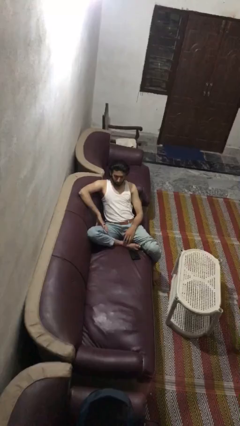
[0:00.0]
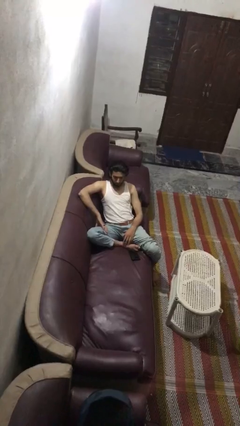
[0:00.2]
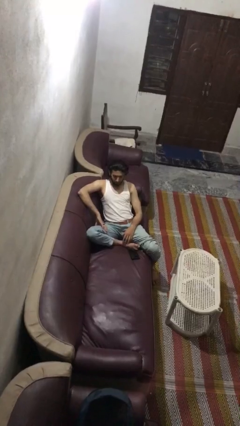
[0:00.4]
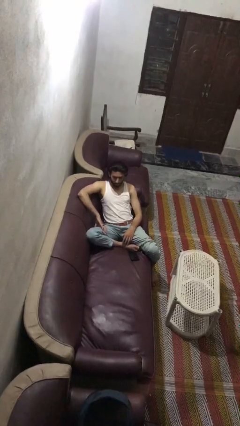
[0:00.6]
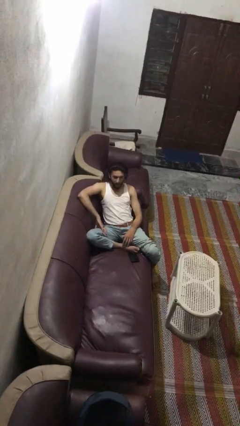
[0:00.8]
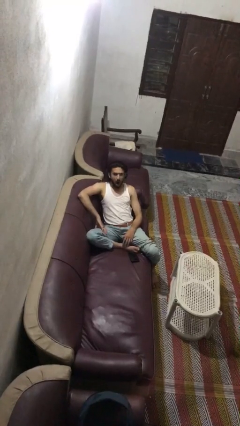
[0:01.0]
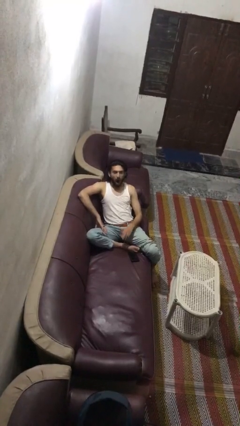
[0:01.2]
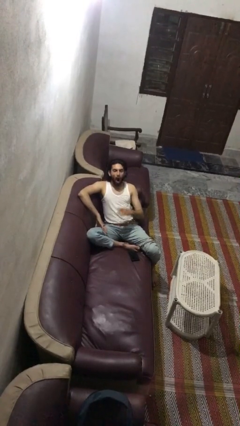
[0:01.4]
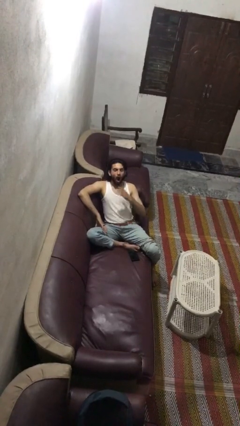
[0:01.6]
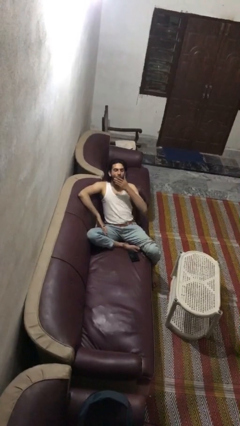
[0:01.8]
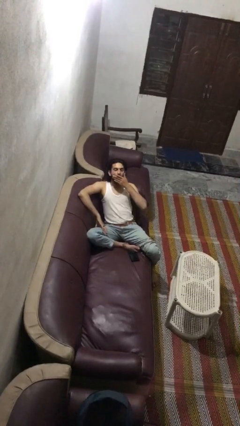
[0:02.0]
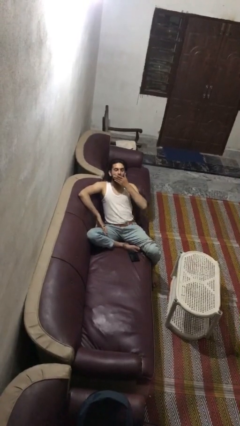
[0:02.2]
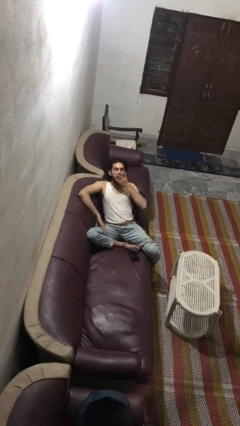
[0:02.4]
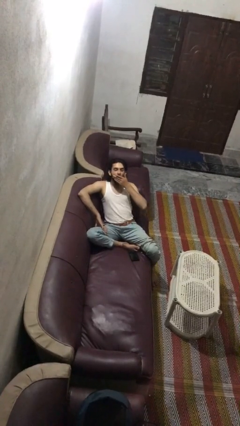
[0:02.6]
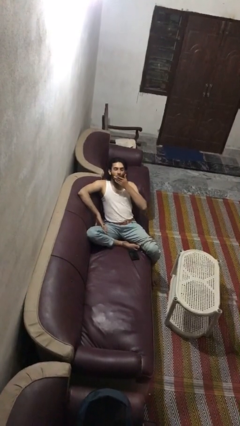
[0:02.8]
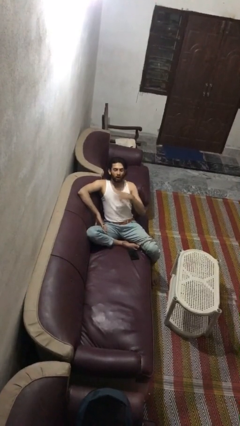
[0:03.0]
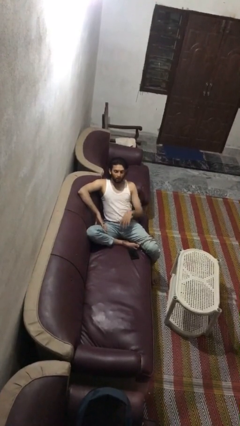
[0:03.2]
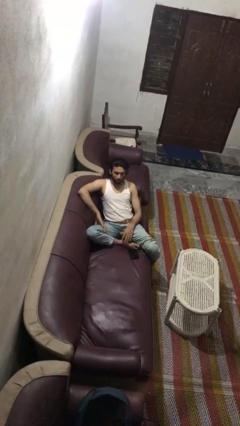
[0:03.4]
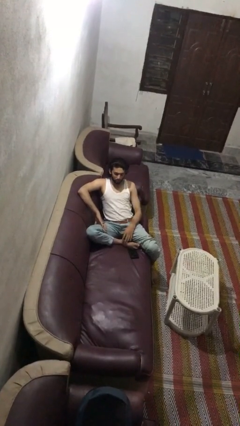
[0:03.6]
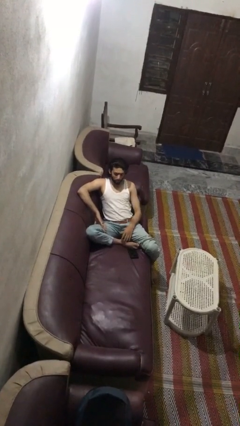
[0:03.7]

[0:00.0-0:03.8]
person yawns

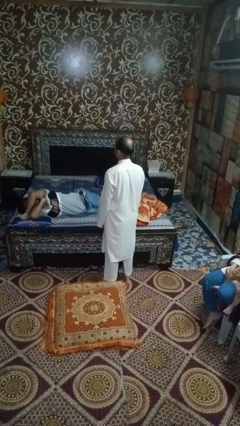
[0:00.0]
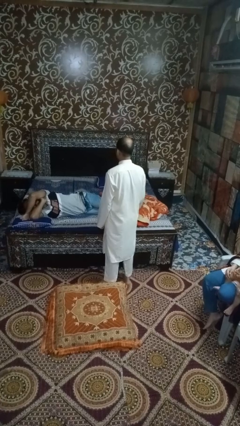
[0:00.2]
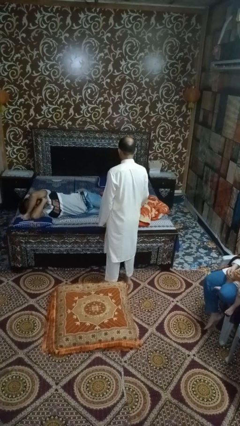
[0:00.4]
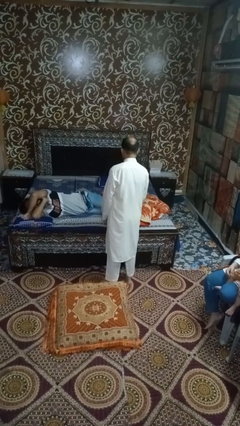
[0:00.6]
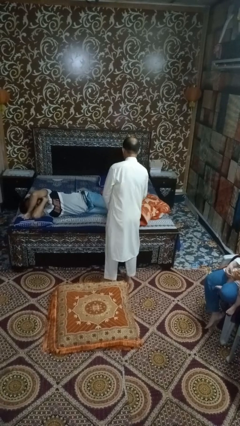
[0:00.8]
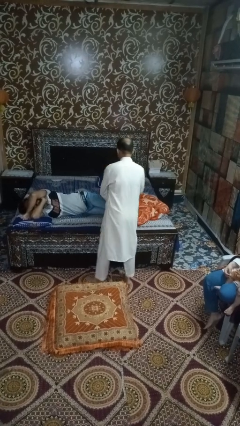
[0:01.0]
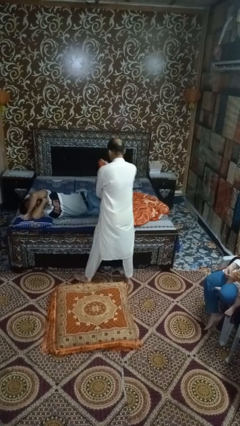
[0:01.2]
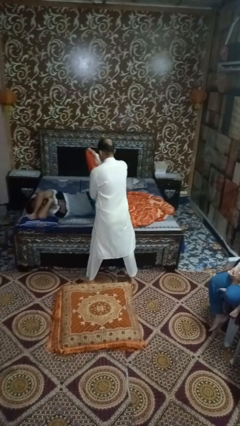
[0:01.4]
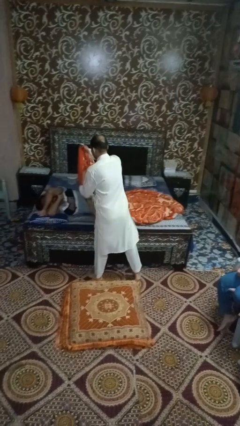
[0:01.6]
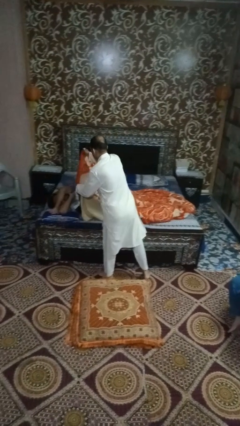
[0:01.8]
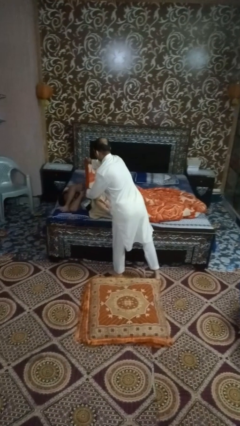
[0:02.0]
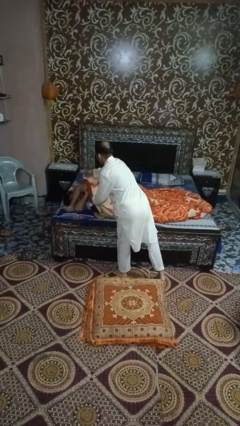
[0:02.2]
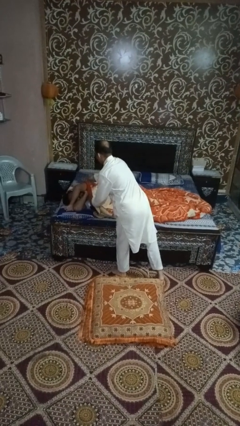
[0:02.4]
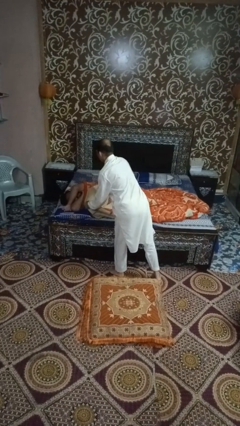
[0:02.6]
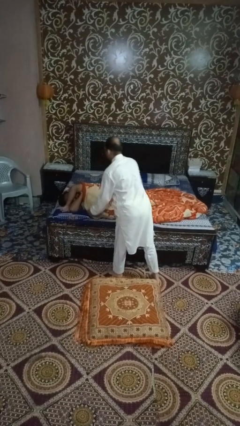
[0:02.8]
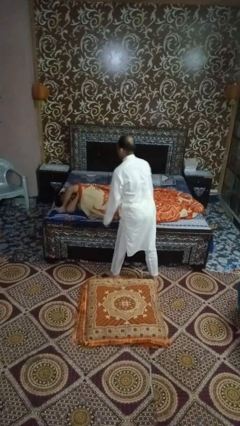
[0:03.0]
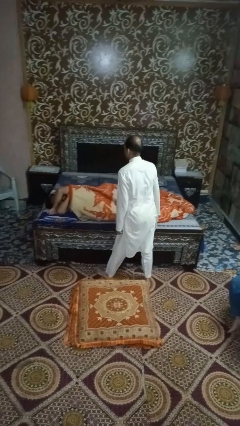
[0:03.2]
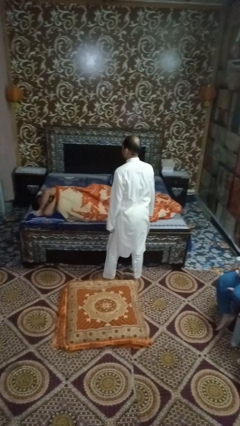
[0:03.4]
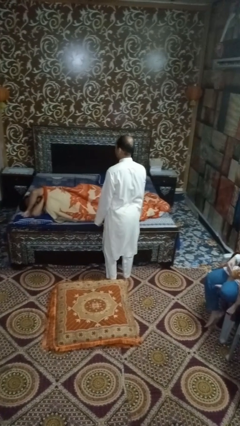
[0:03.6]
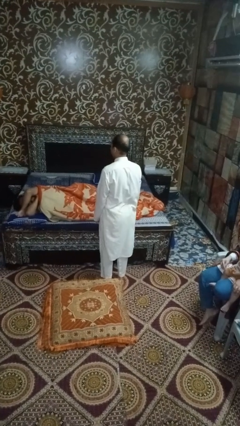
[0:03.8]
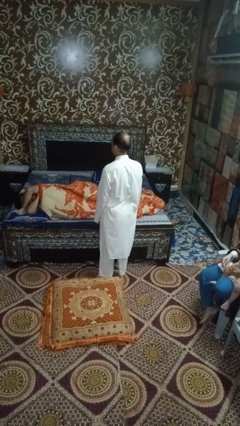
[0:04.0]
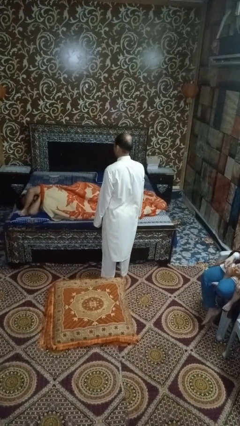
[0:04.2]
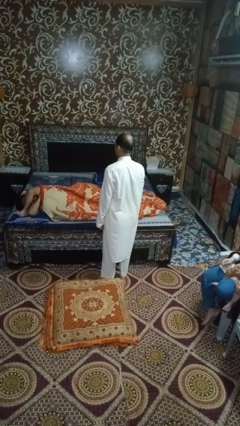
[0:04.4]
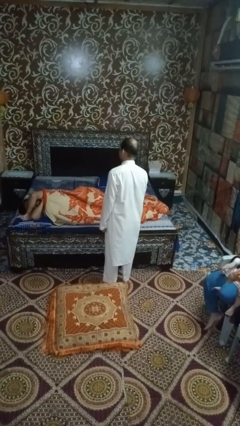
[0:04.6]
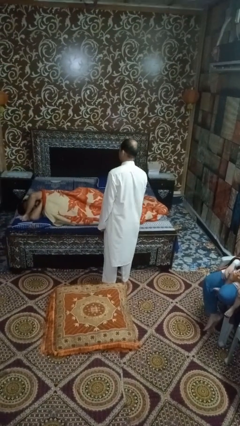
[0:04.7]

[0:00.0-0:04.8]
person covers friend with blanket

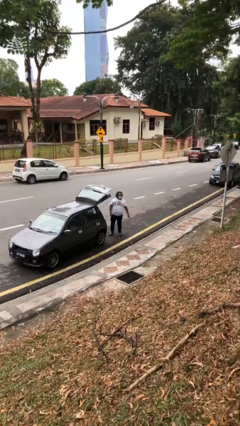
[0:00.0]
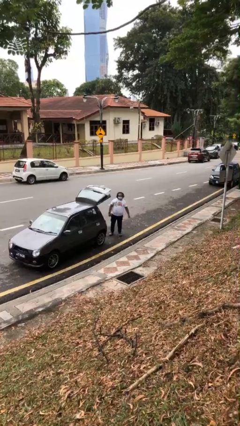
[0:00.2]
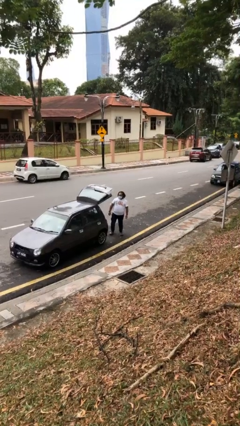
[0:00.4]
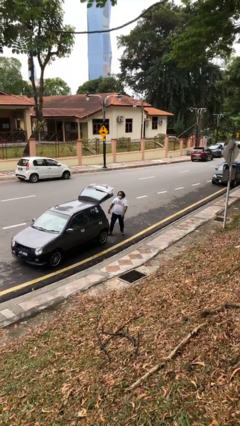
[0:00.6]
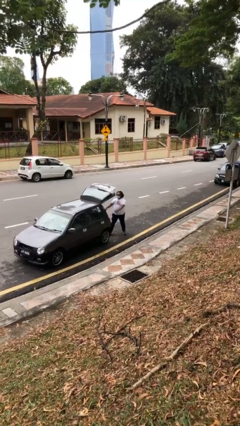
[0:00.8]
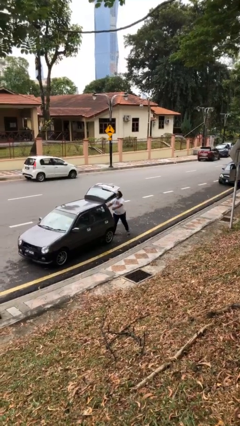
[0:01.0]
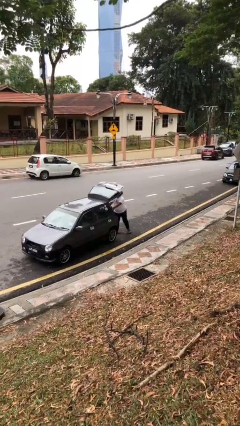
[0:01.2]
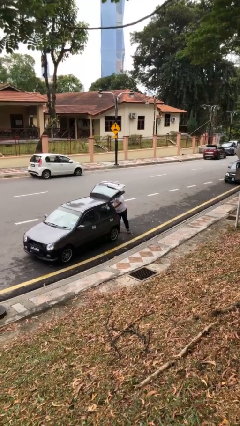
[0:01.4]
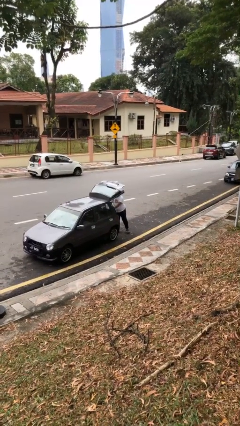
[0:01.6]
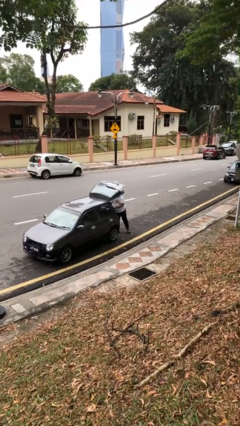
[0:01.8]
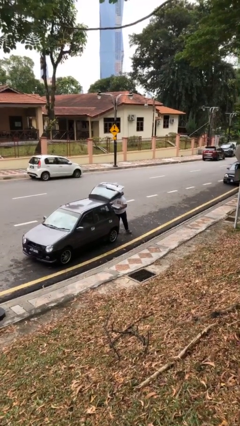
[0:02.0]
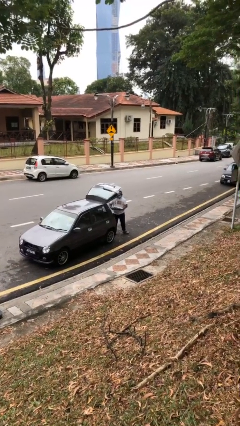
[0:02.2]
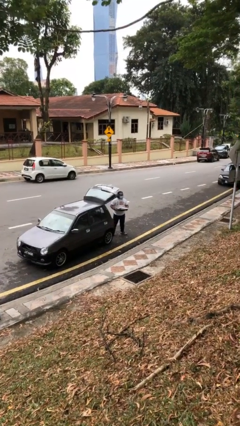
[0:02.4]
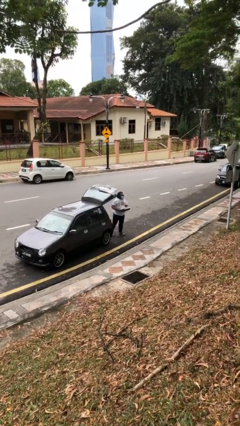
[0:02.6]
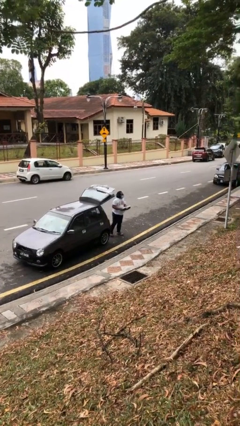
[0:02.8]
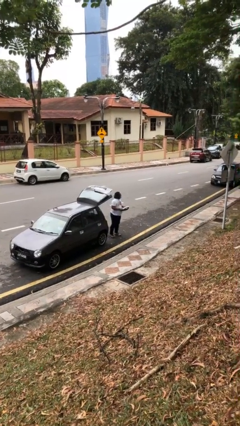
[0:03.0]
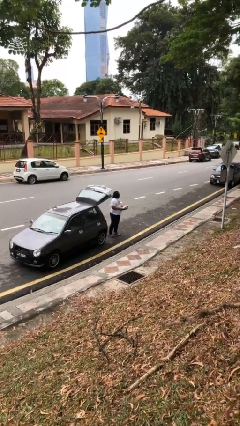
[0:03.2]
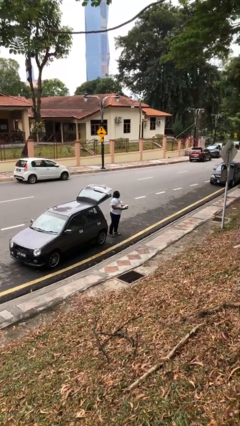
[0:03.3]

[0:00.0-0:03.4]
person unloads car

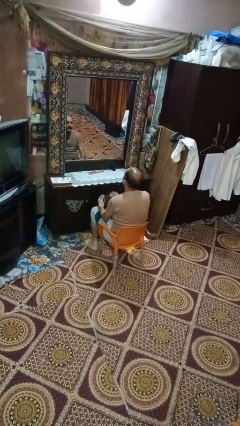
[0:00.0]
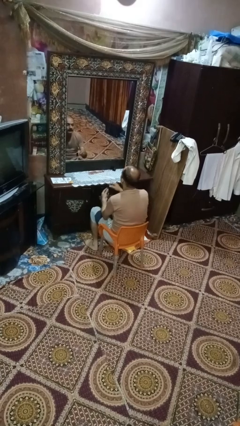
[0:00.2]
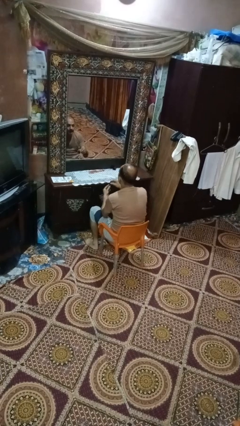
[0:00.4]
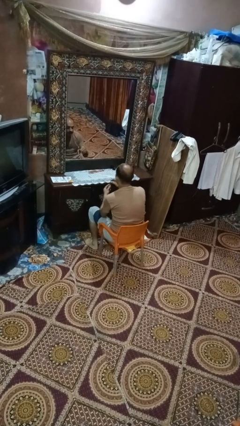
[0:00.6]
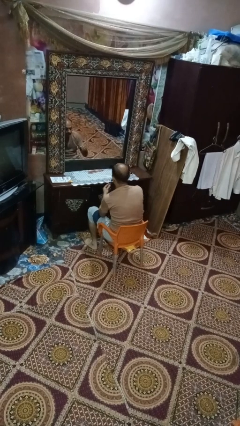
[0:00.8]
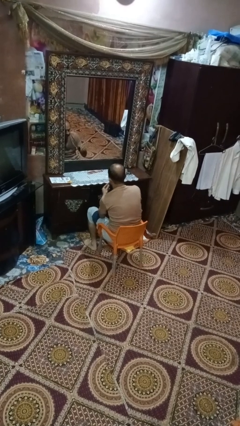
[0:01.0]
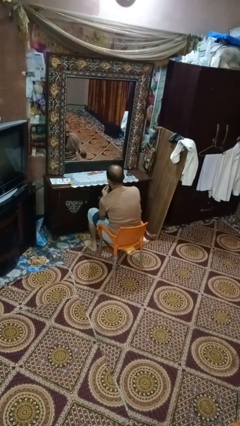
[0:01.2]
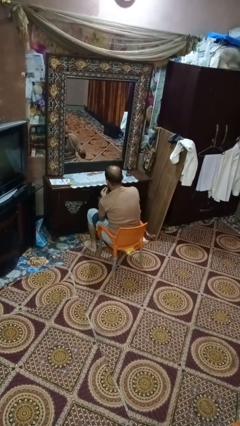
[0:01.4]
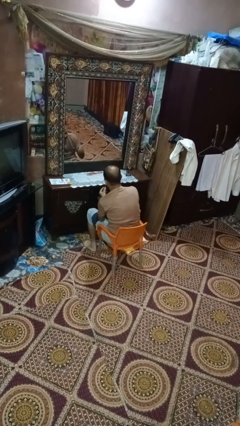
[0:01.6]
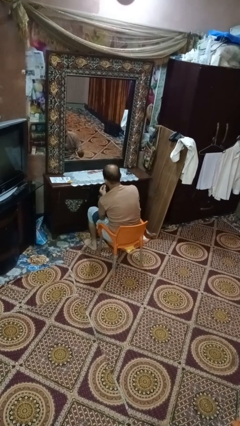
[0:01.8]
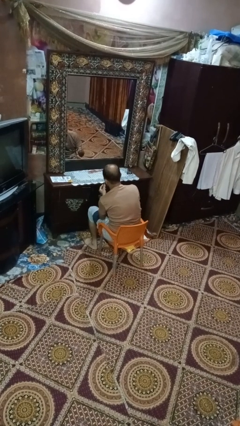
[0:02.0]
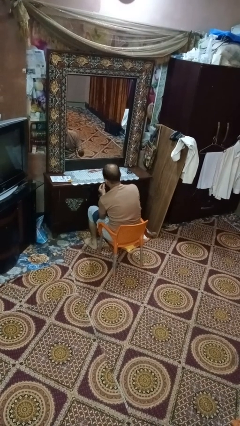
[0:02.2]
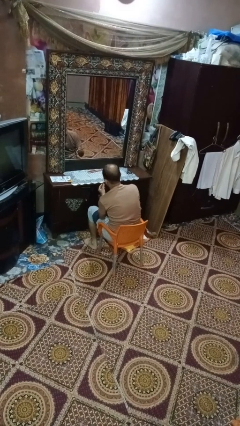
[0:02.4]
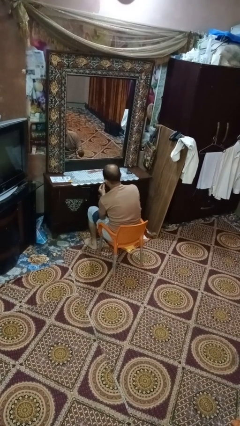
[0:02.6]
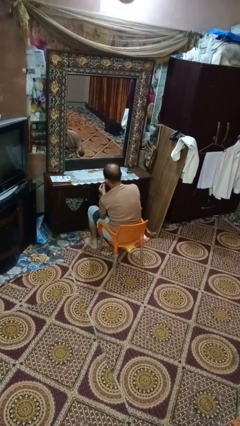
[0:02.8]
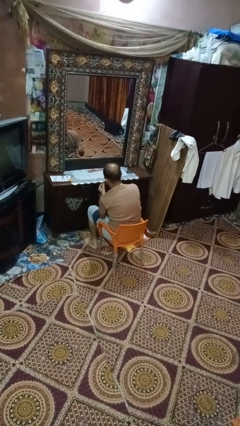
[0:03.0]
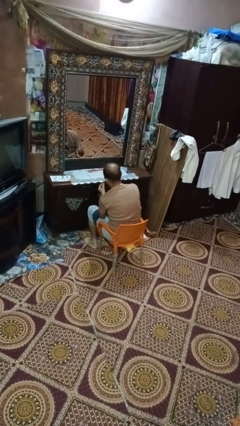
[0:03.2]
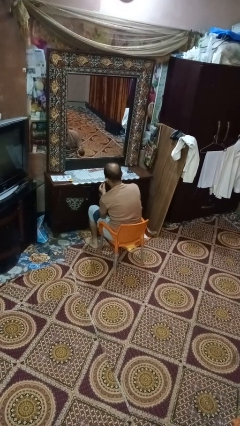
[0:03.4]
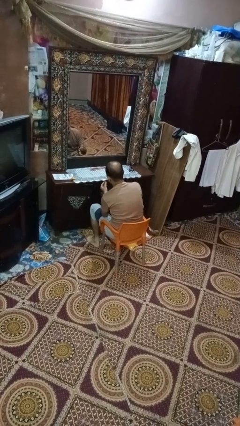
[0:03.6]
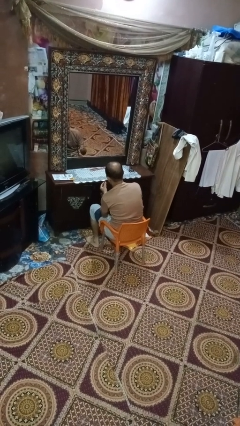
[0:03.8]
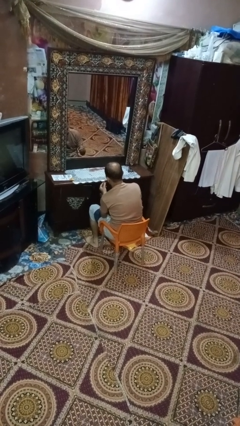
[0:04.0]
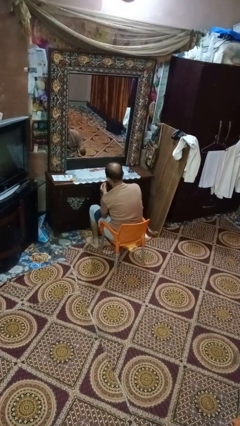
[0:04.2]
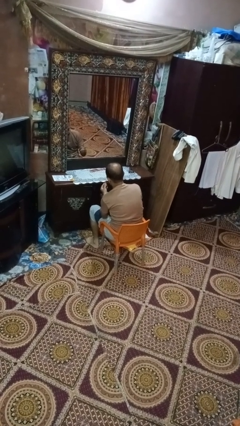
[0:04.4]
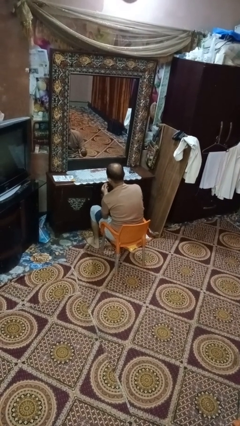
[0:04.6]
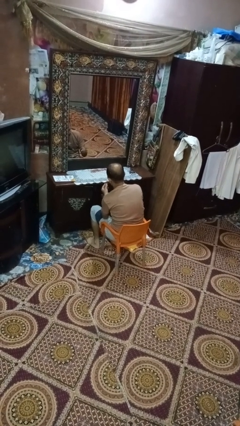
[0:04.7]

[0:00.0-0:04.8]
person paints fingernails

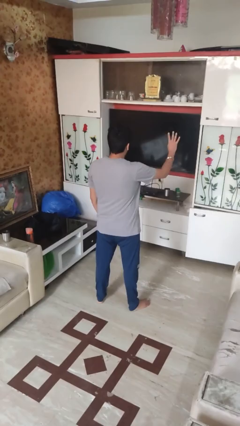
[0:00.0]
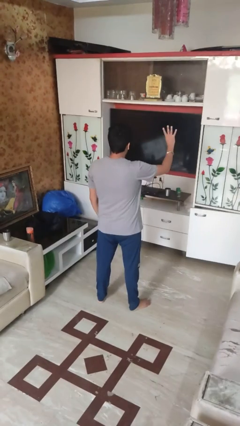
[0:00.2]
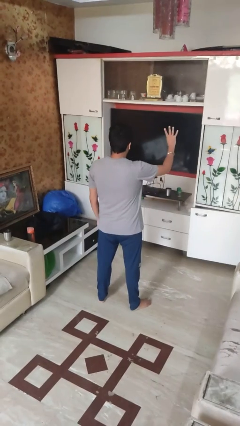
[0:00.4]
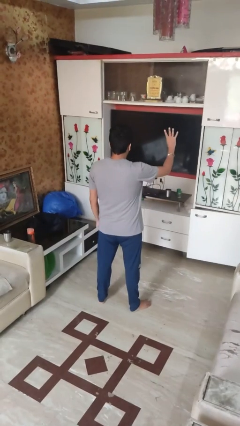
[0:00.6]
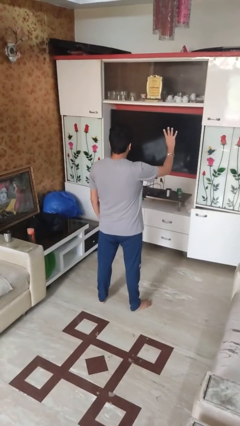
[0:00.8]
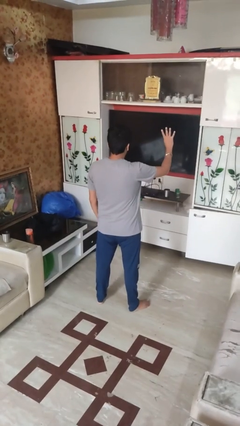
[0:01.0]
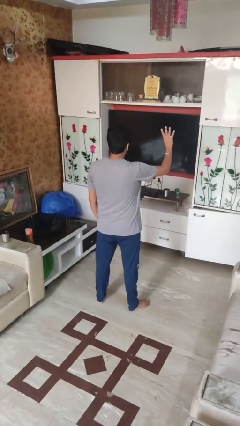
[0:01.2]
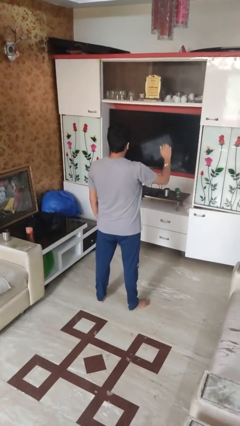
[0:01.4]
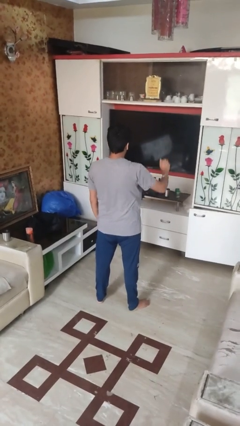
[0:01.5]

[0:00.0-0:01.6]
person gestures number four
